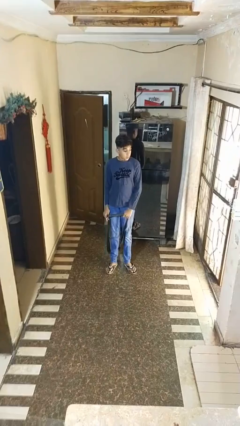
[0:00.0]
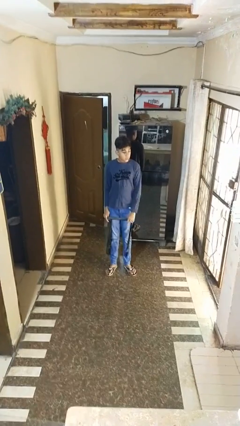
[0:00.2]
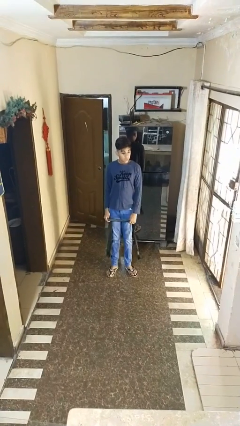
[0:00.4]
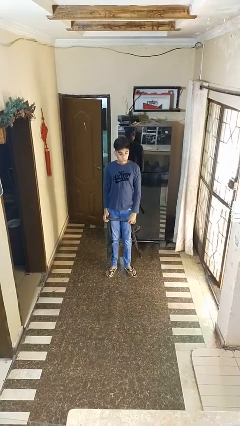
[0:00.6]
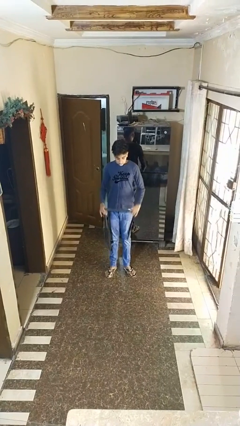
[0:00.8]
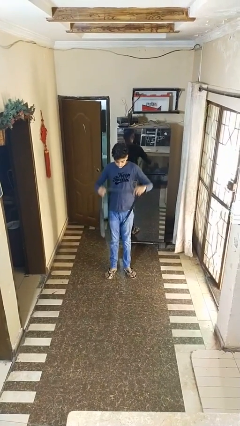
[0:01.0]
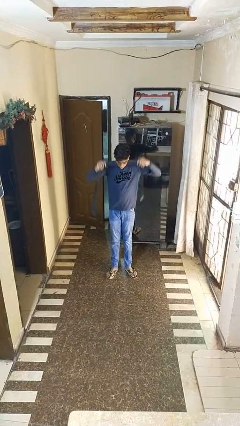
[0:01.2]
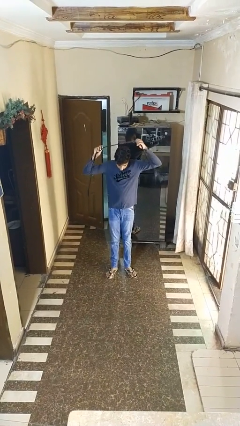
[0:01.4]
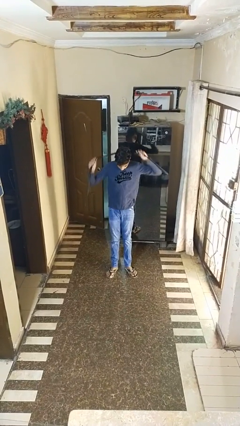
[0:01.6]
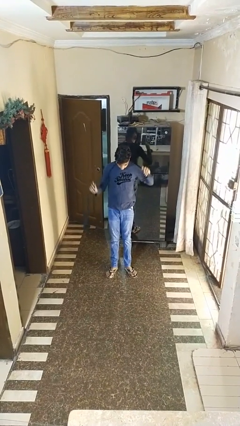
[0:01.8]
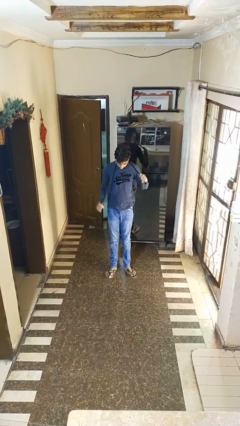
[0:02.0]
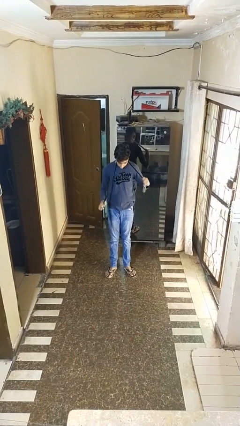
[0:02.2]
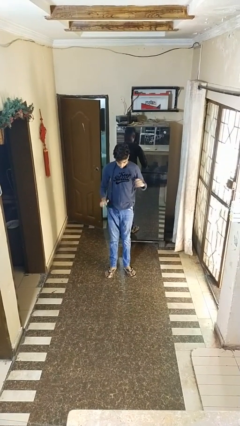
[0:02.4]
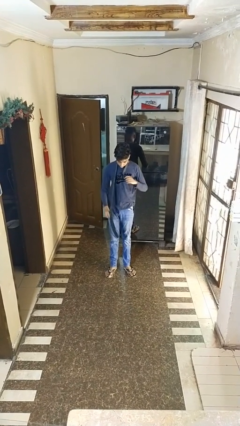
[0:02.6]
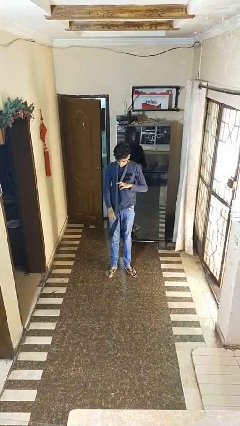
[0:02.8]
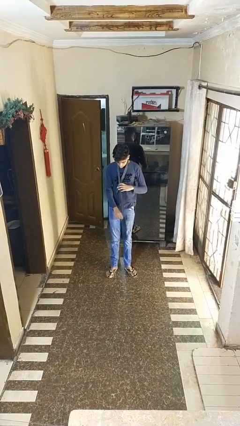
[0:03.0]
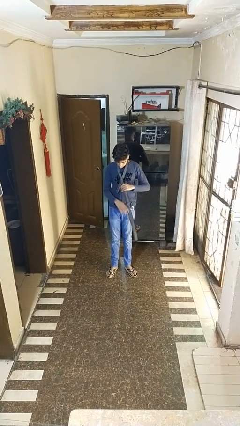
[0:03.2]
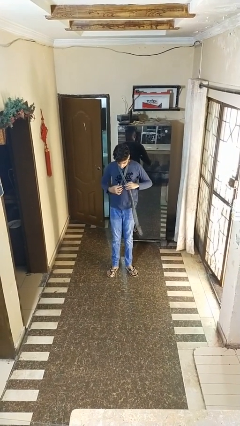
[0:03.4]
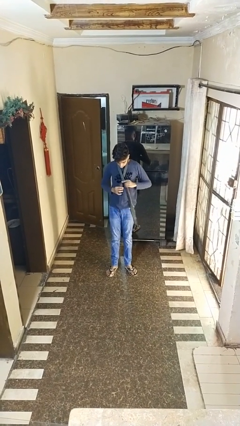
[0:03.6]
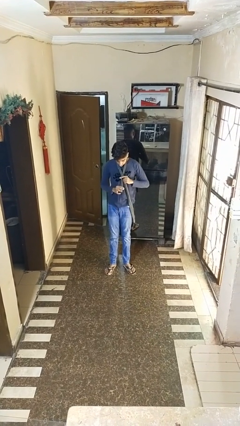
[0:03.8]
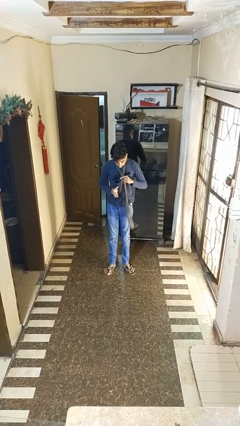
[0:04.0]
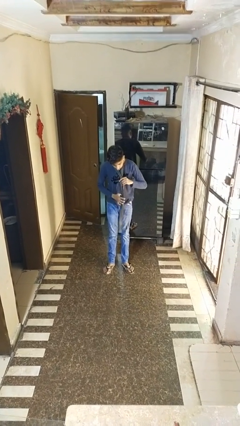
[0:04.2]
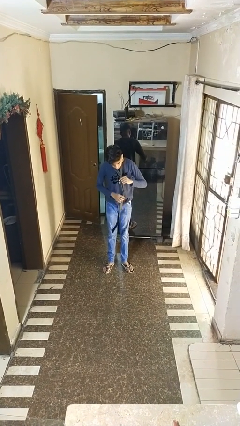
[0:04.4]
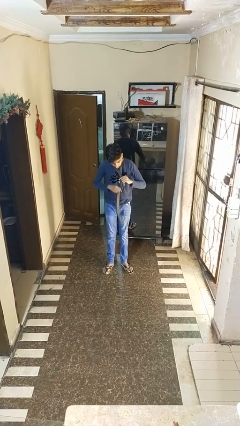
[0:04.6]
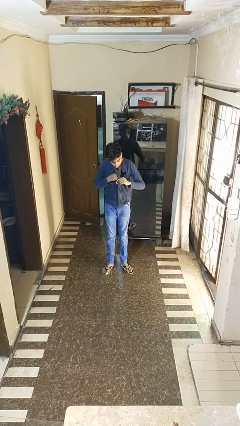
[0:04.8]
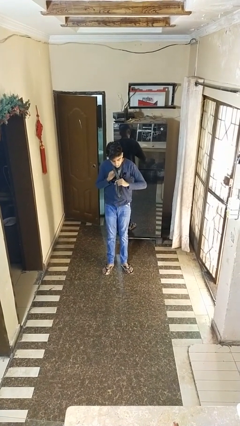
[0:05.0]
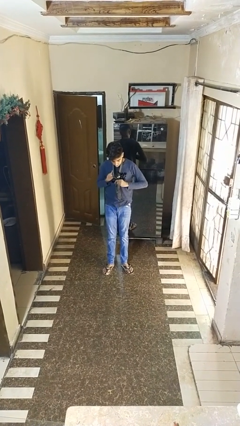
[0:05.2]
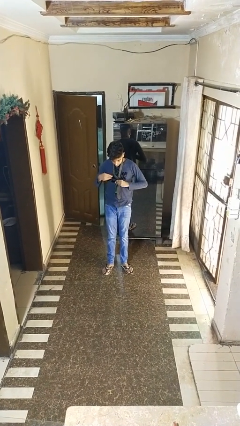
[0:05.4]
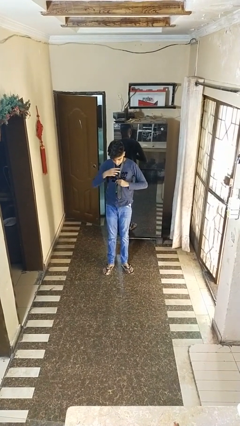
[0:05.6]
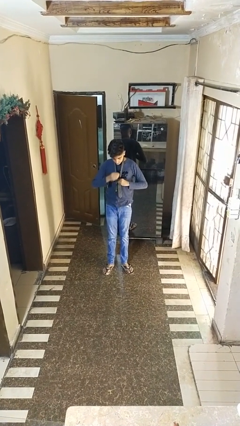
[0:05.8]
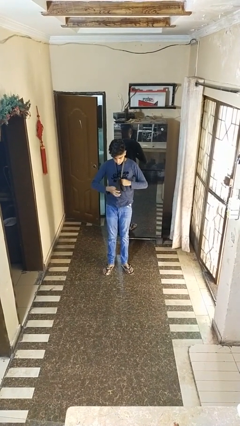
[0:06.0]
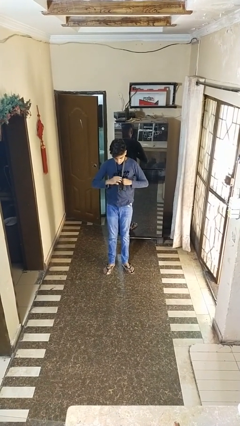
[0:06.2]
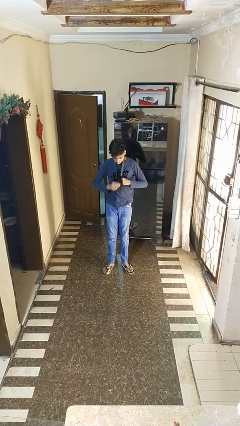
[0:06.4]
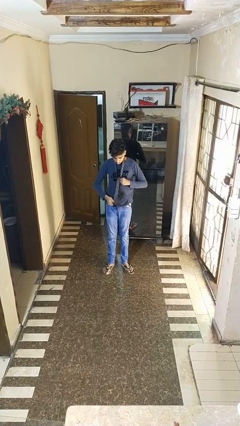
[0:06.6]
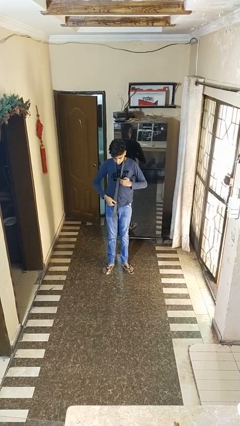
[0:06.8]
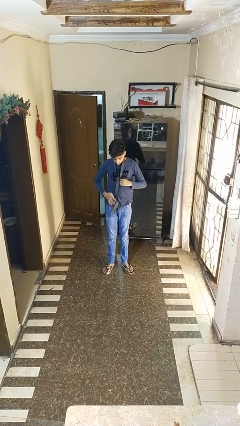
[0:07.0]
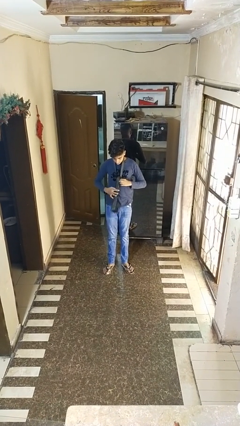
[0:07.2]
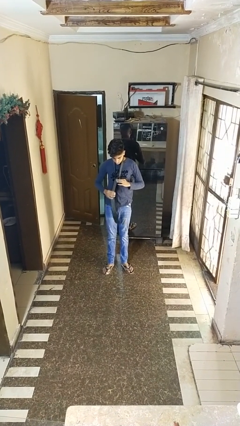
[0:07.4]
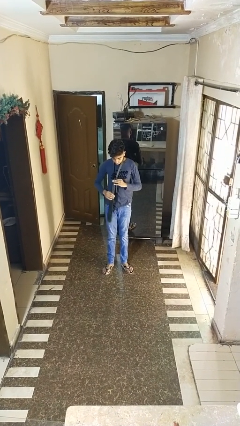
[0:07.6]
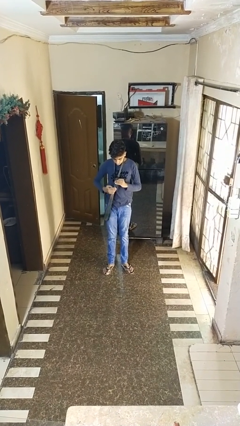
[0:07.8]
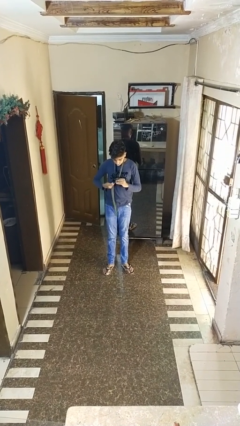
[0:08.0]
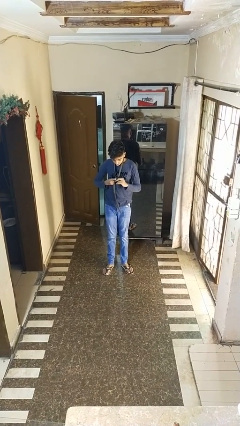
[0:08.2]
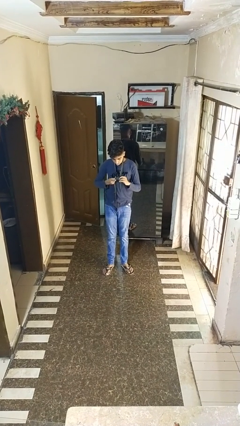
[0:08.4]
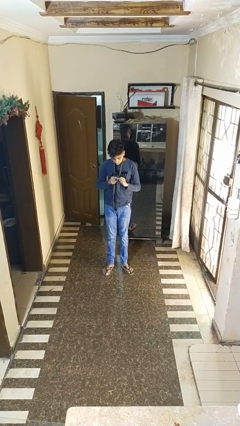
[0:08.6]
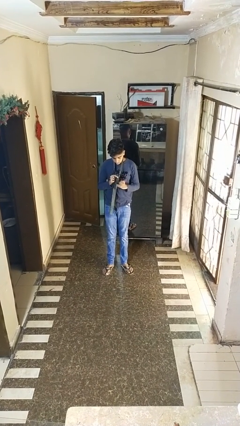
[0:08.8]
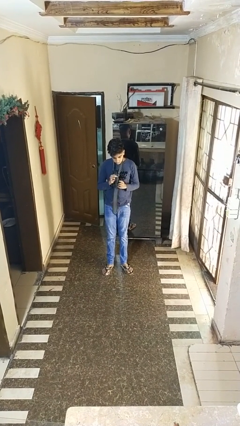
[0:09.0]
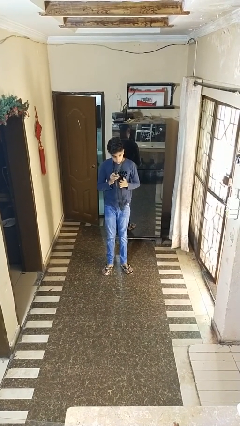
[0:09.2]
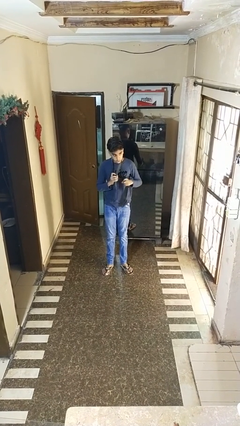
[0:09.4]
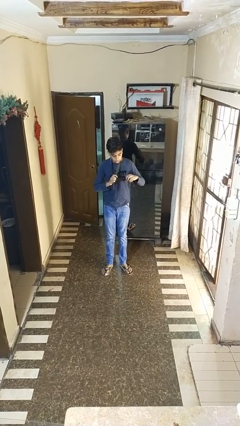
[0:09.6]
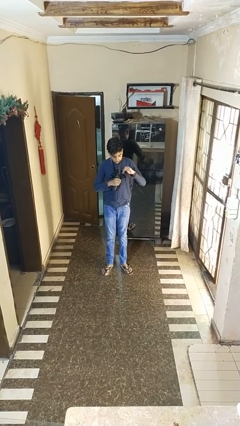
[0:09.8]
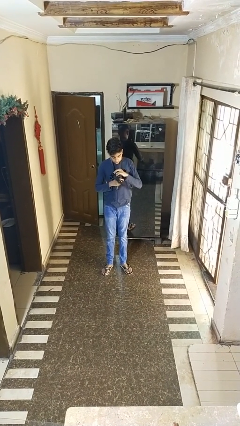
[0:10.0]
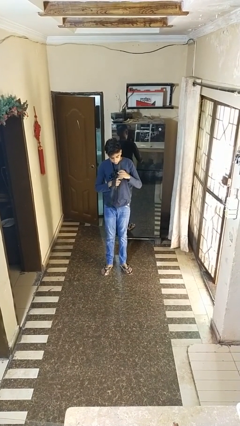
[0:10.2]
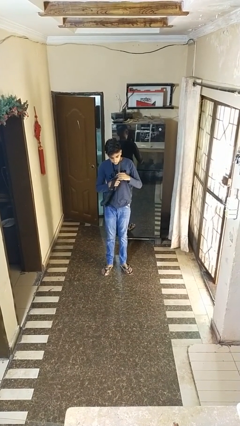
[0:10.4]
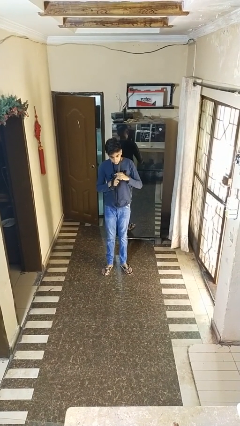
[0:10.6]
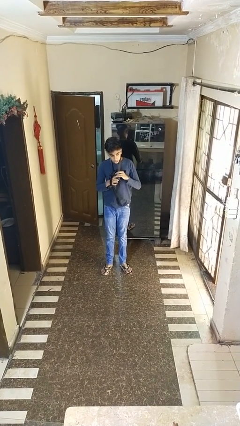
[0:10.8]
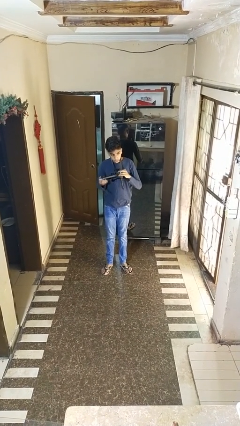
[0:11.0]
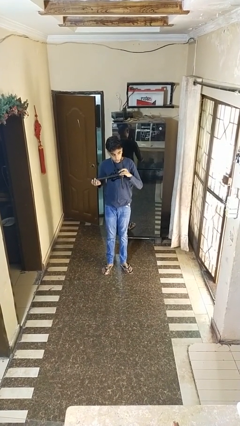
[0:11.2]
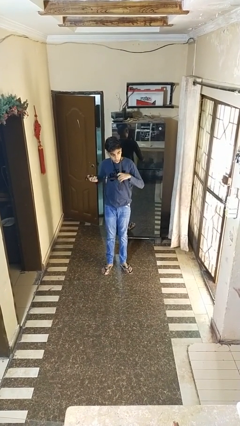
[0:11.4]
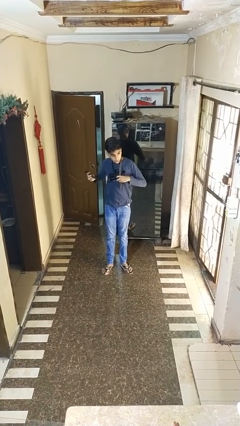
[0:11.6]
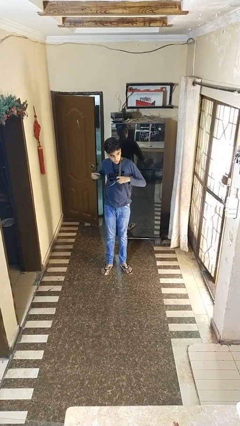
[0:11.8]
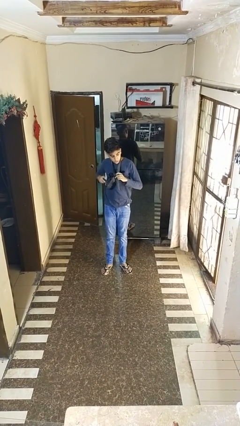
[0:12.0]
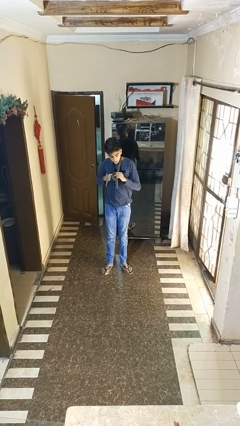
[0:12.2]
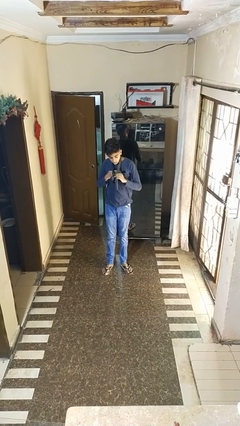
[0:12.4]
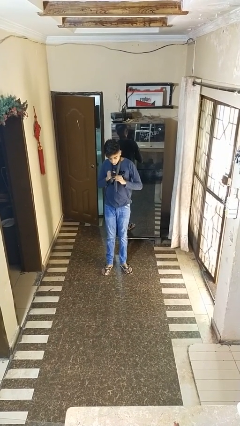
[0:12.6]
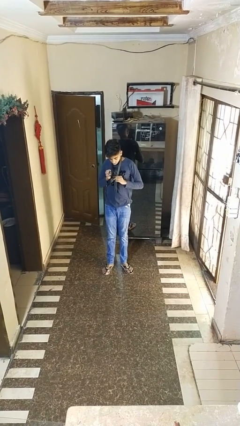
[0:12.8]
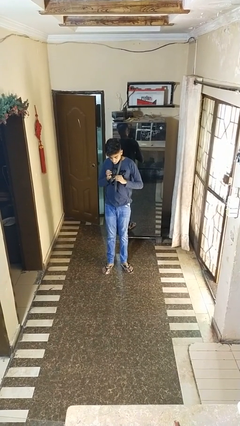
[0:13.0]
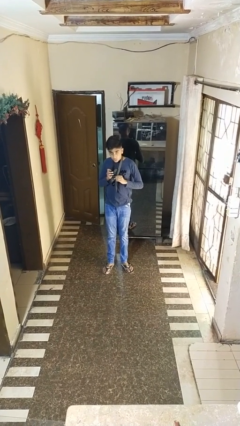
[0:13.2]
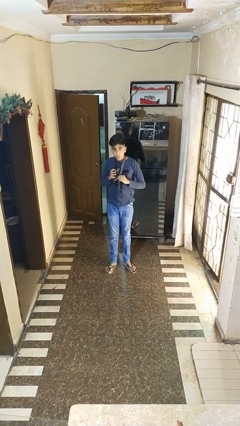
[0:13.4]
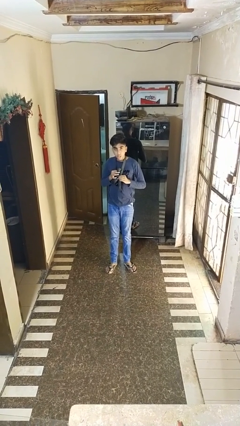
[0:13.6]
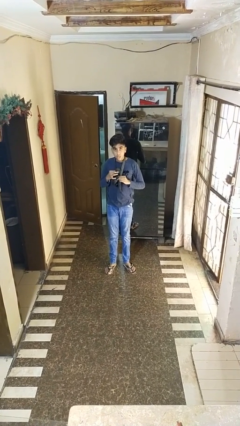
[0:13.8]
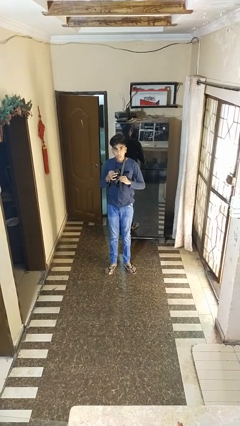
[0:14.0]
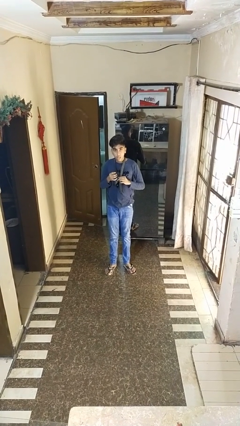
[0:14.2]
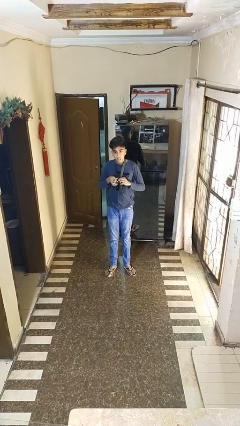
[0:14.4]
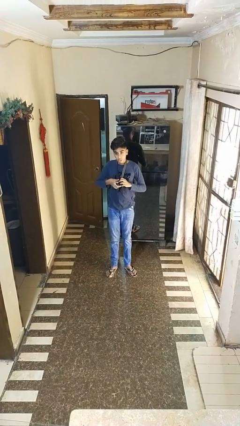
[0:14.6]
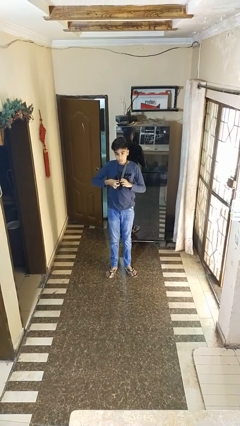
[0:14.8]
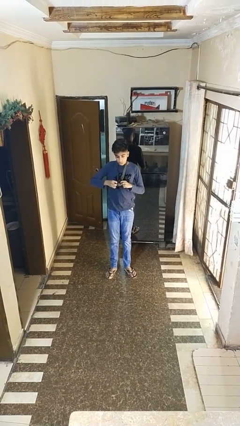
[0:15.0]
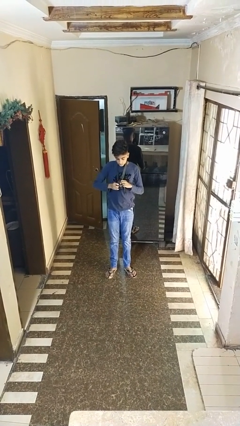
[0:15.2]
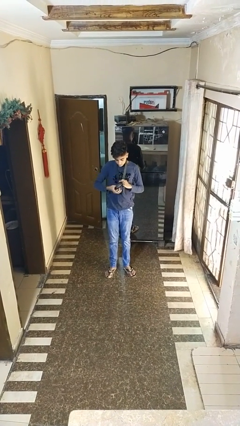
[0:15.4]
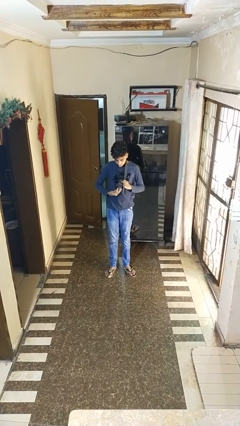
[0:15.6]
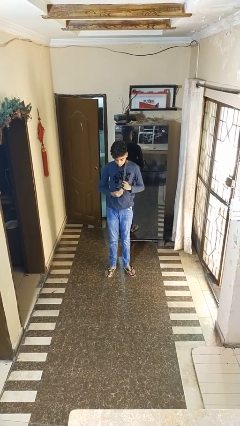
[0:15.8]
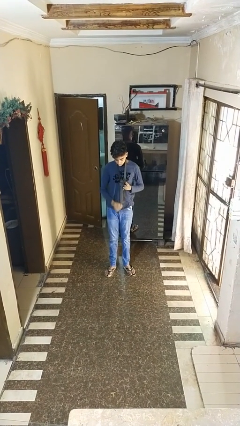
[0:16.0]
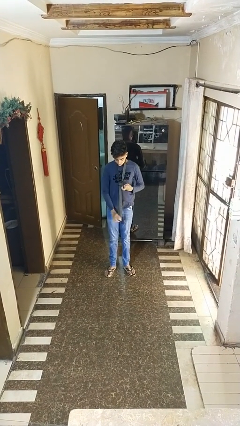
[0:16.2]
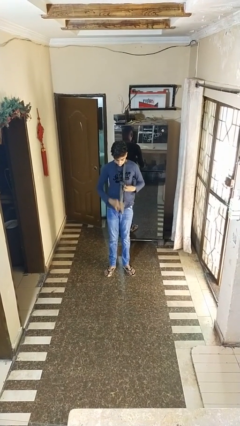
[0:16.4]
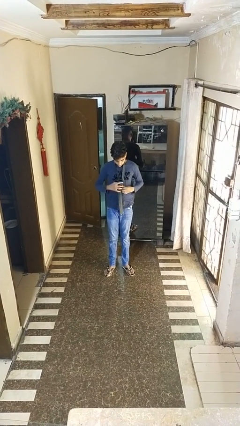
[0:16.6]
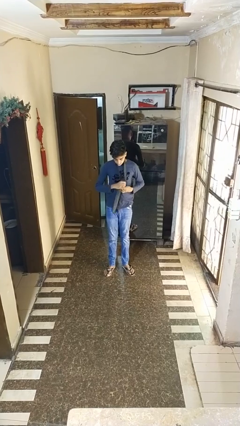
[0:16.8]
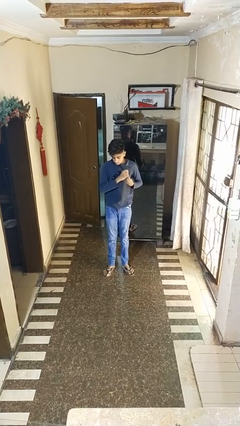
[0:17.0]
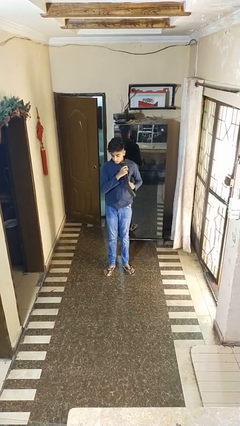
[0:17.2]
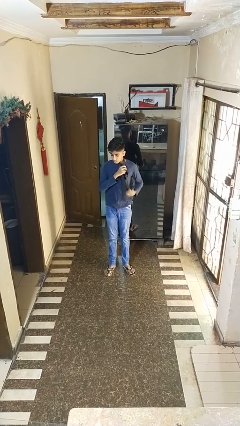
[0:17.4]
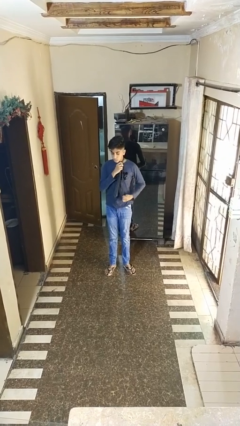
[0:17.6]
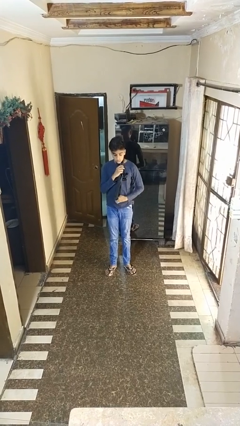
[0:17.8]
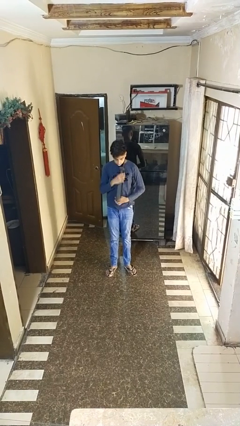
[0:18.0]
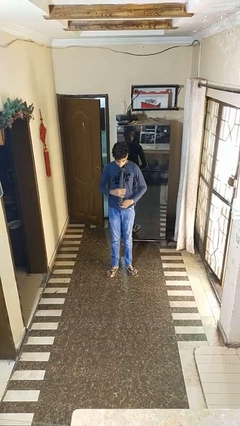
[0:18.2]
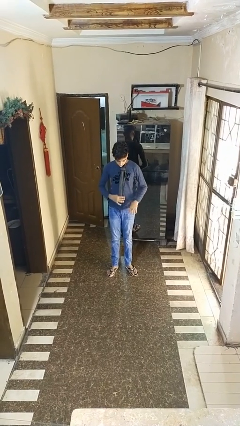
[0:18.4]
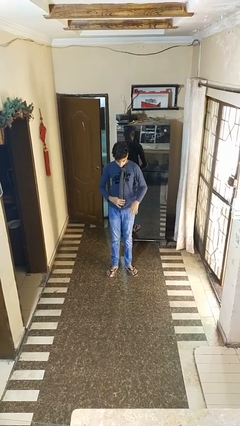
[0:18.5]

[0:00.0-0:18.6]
person puts on necktie
